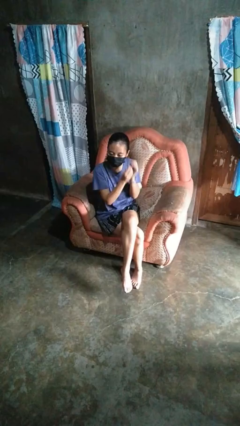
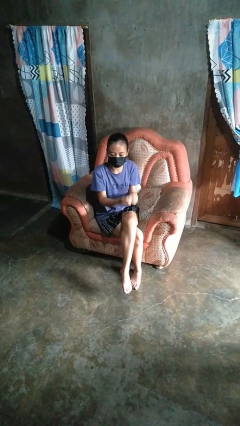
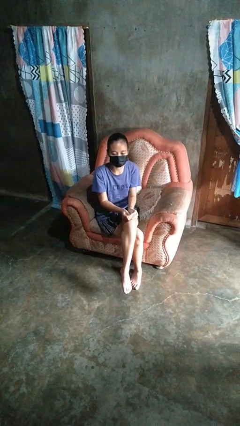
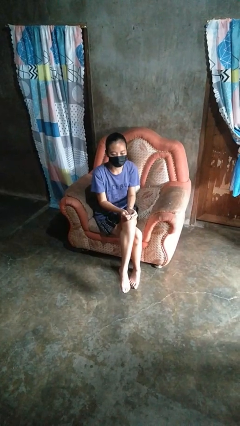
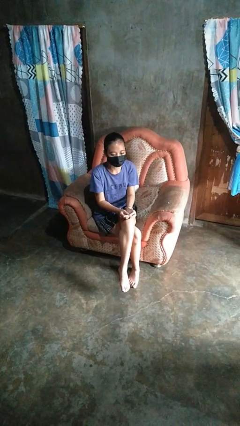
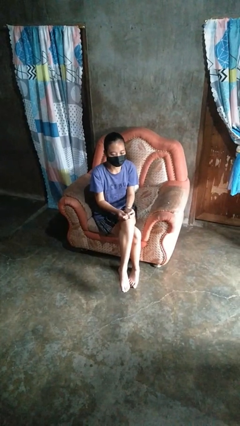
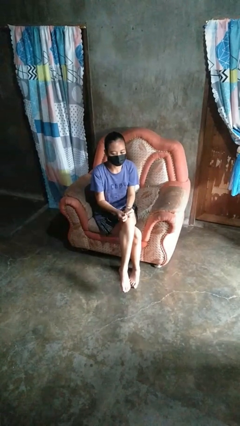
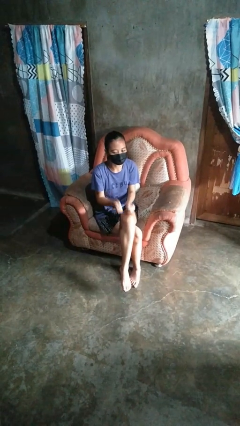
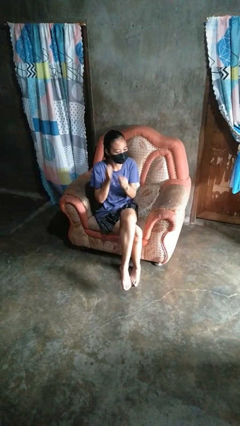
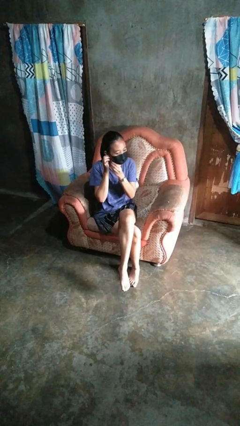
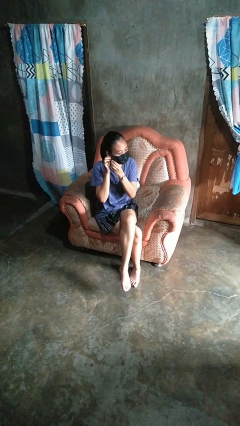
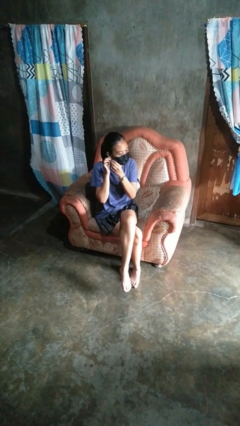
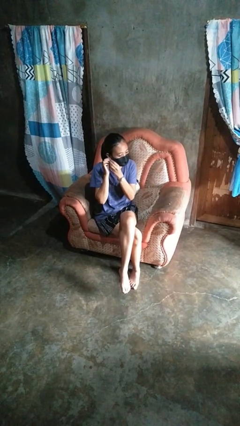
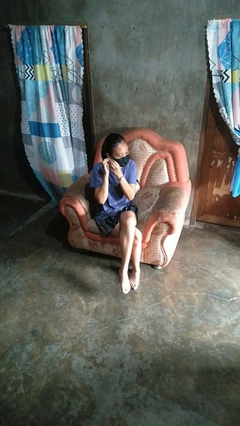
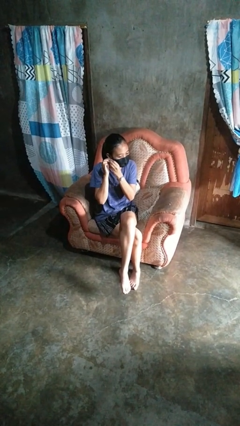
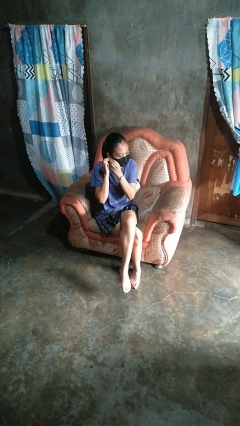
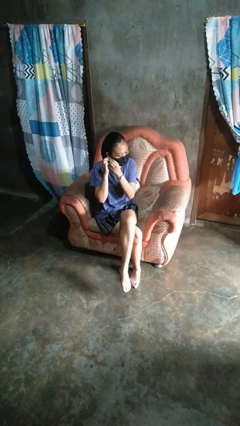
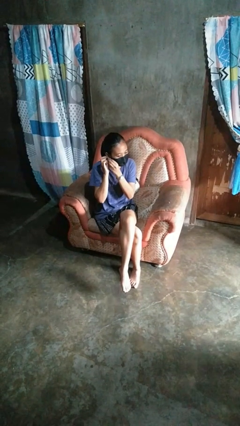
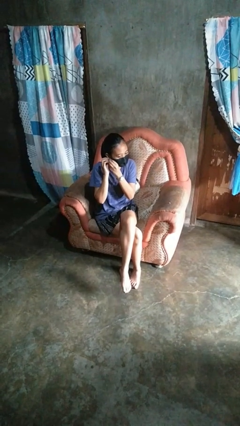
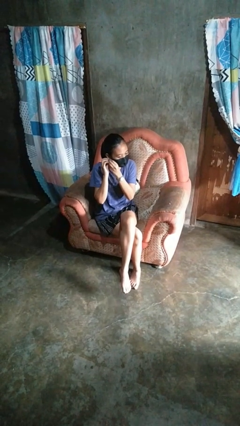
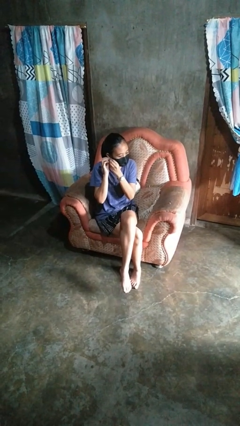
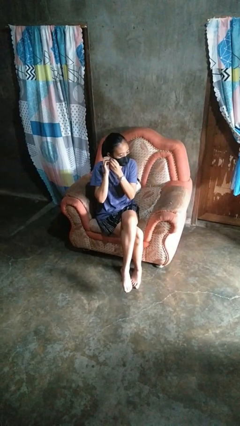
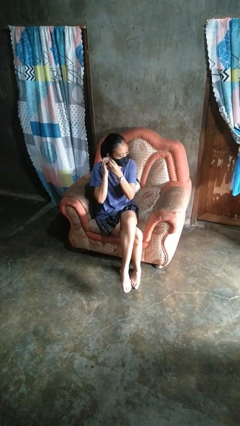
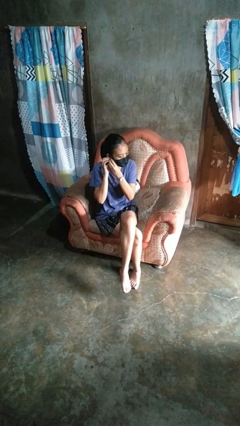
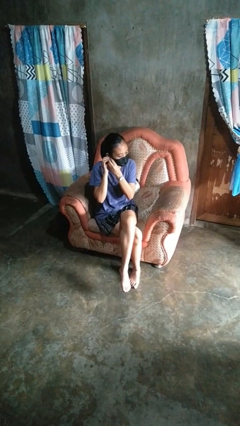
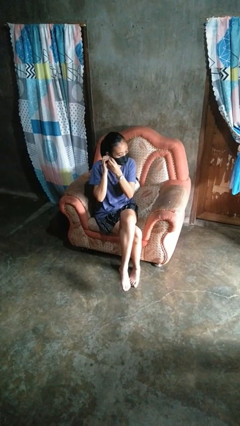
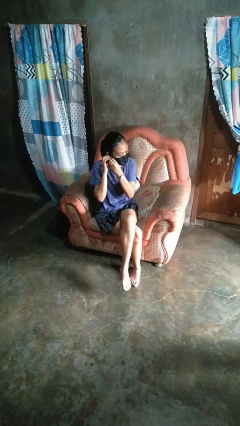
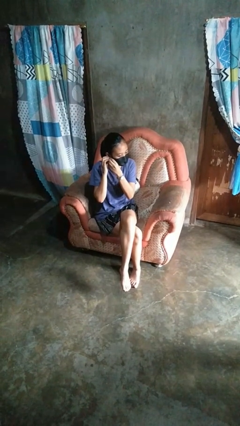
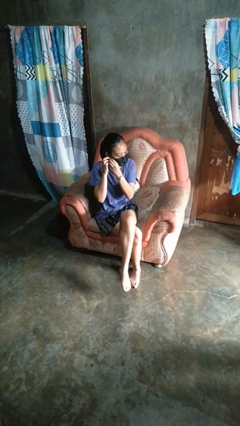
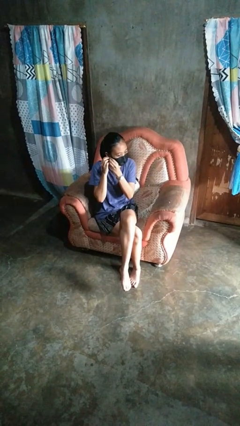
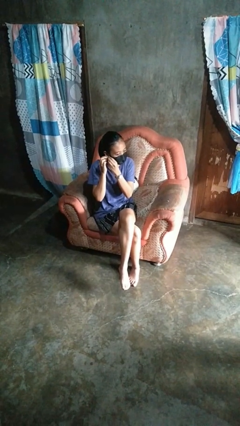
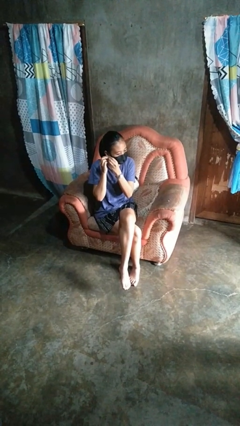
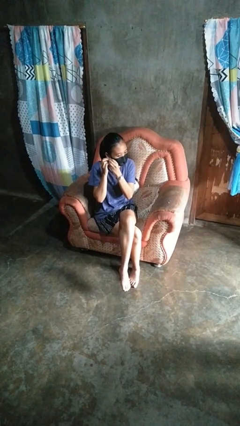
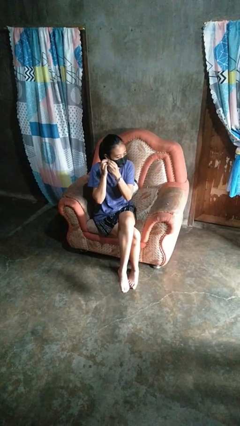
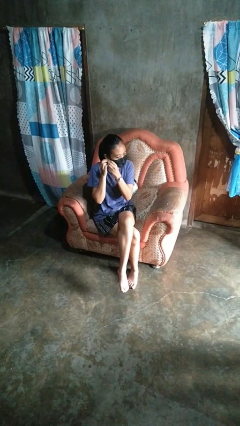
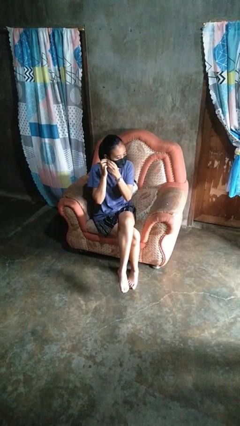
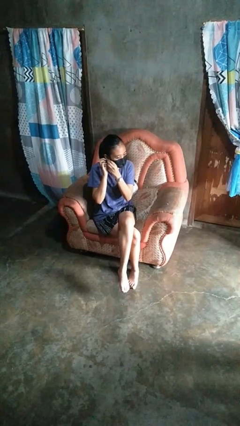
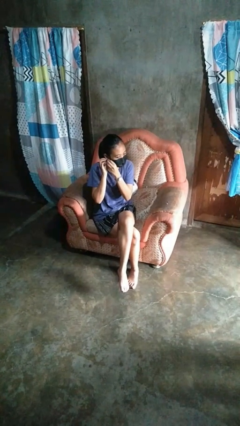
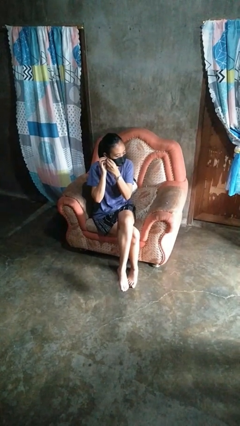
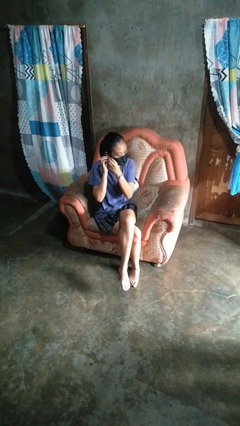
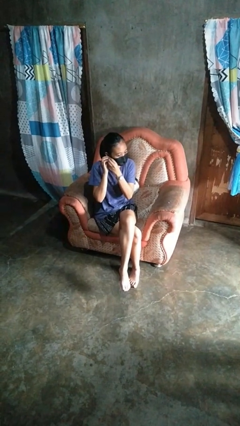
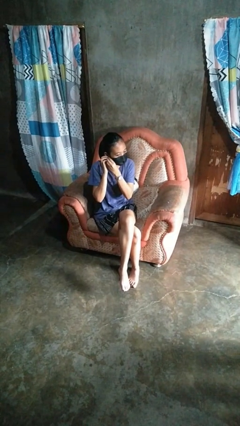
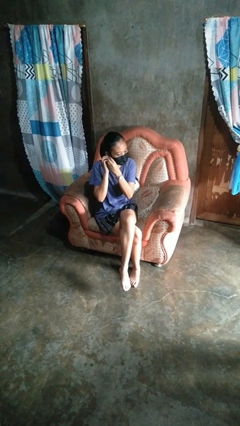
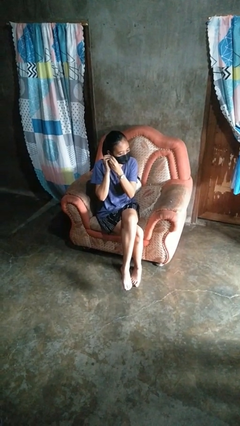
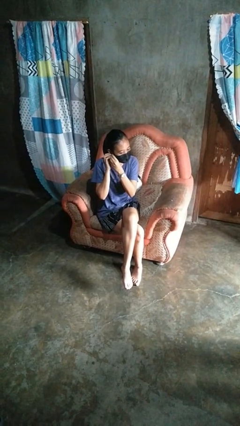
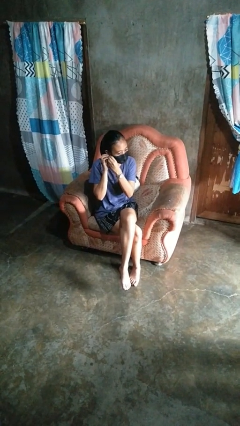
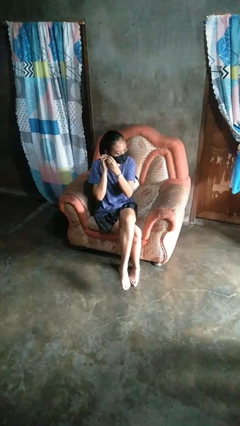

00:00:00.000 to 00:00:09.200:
person puts on earrings

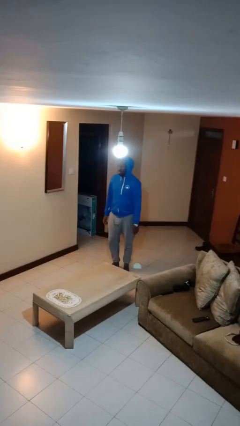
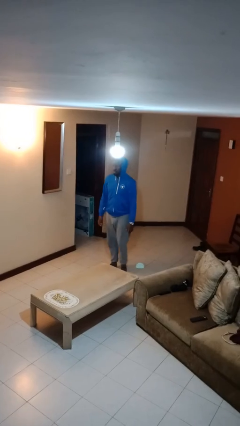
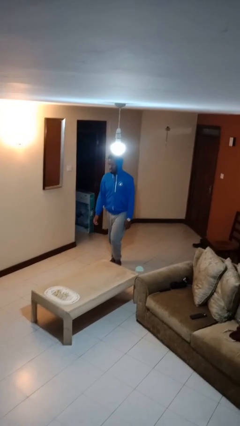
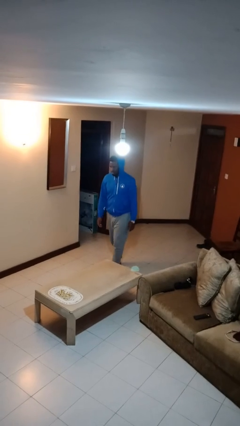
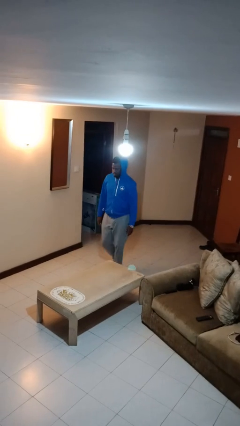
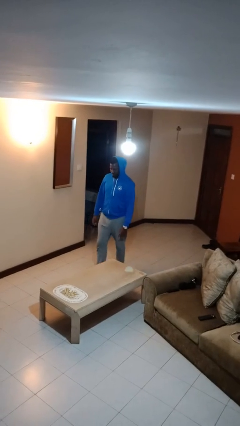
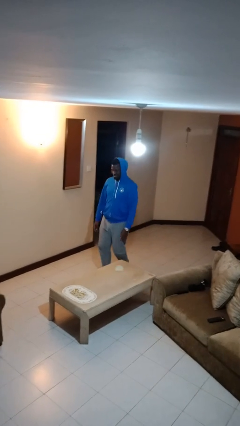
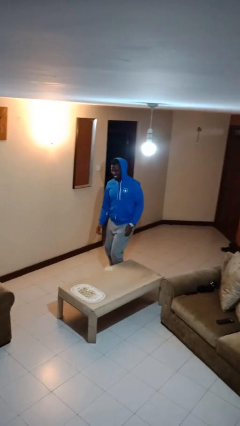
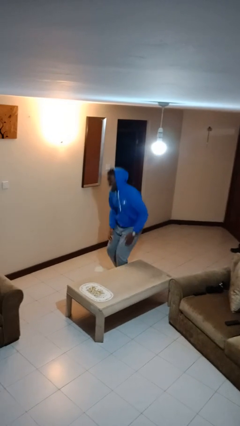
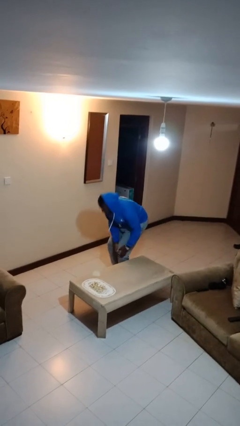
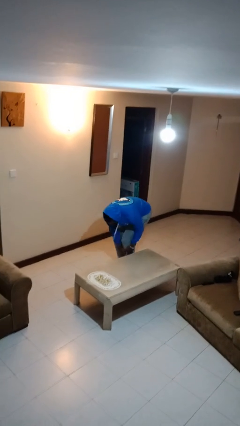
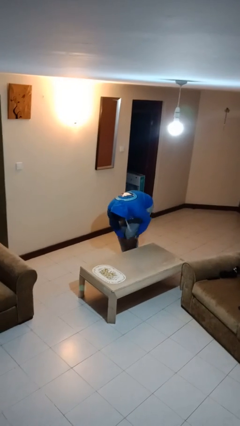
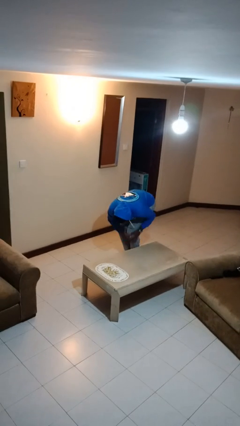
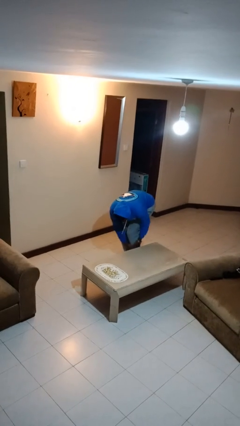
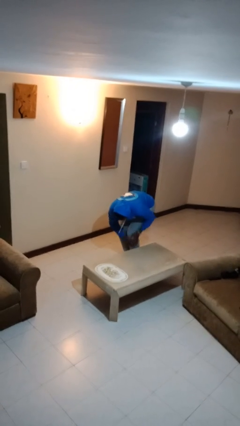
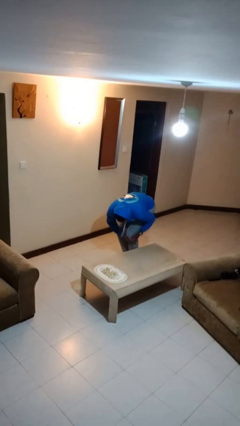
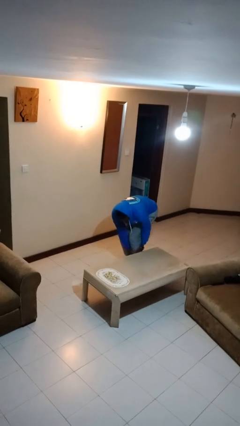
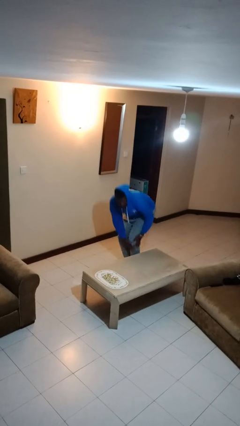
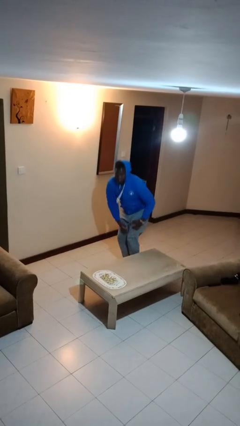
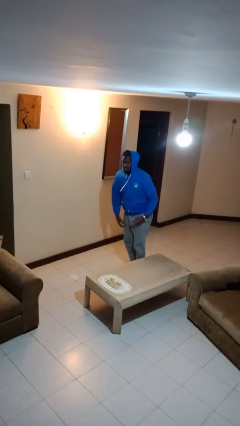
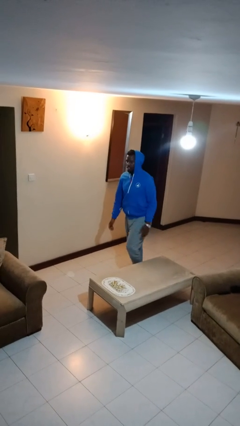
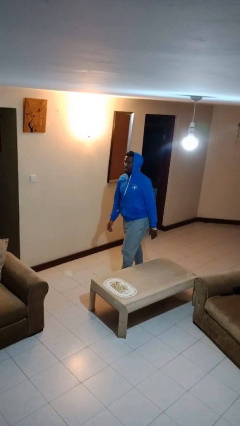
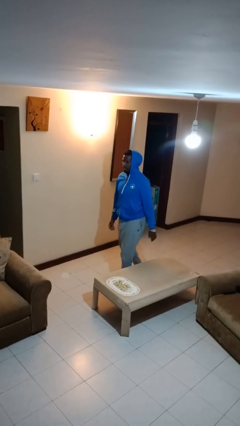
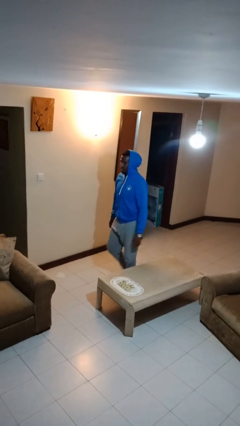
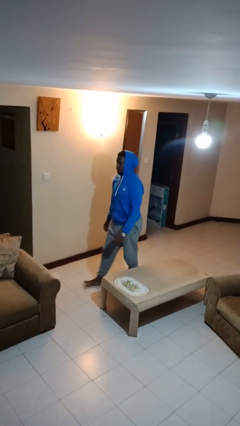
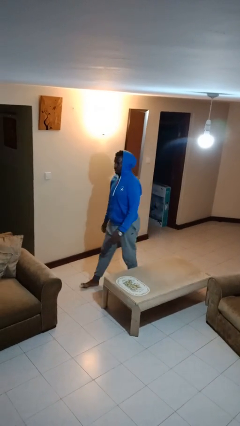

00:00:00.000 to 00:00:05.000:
person bumps into table

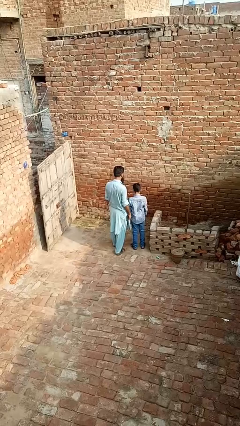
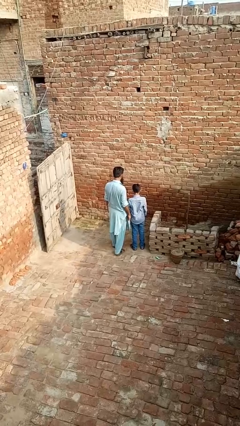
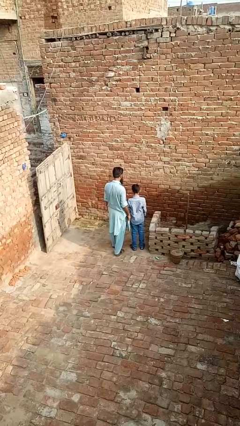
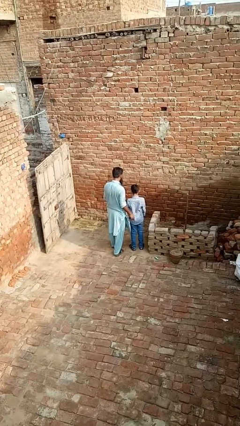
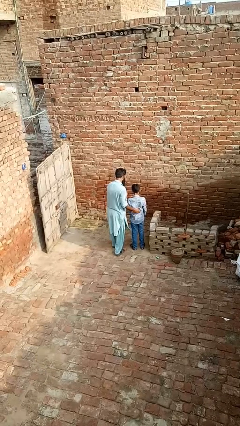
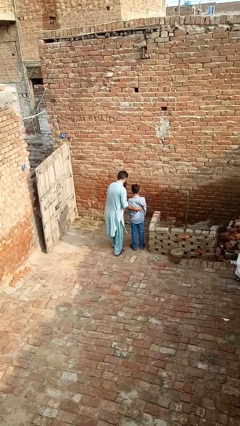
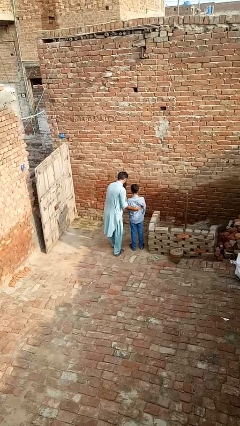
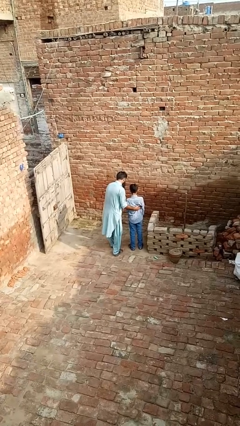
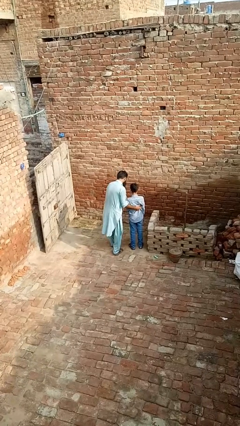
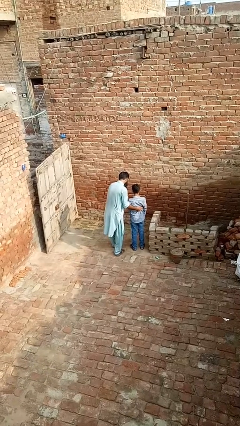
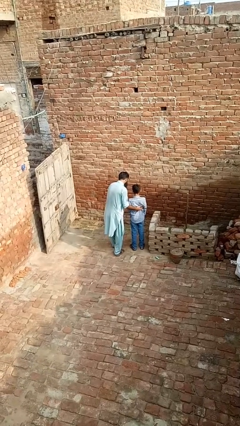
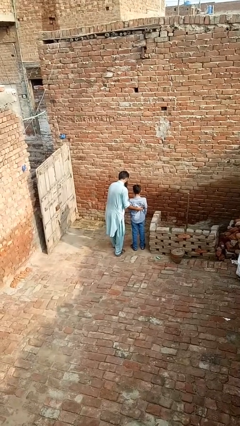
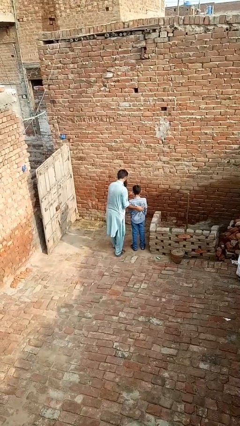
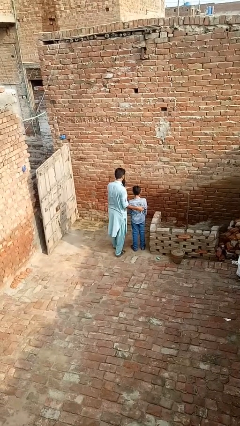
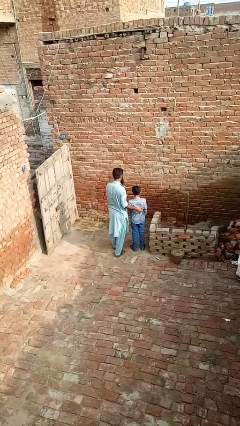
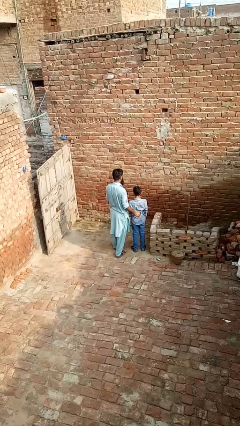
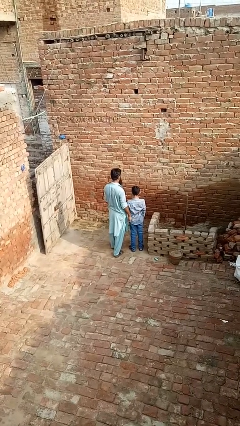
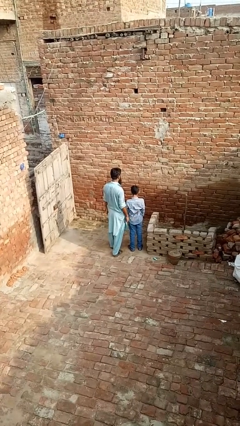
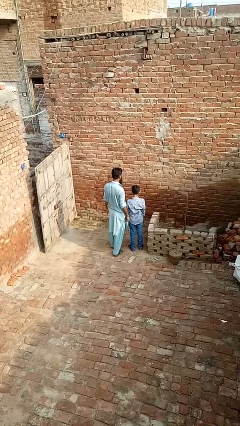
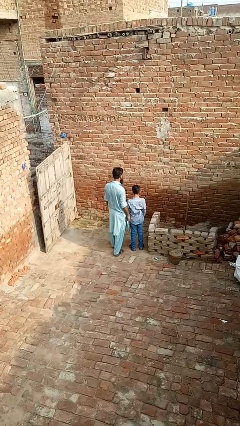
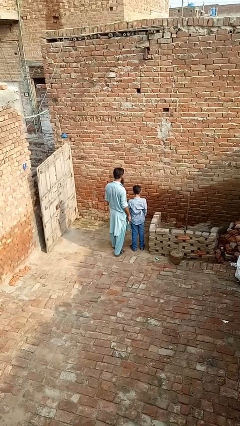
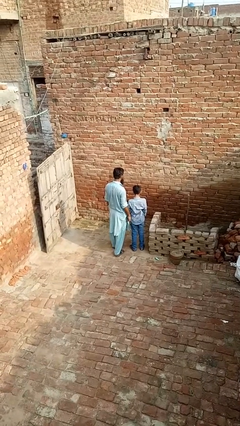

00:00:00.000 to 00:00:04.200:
person tickles person
